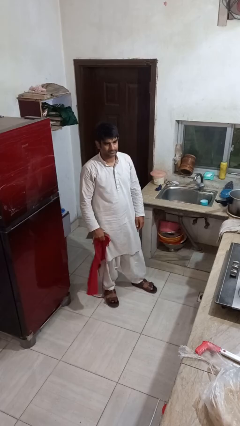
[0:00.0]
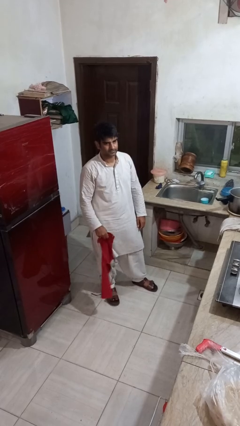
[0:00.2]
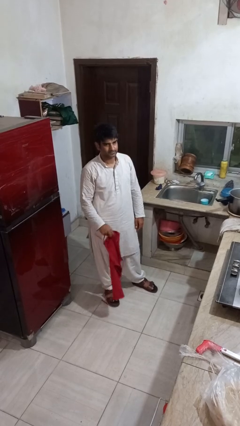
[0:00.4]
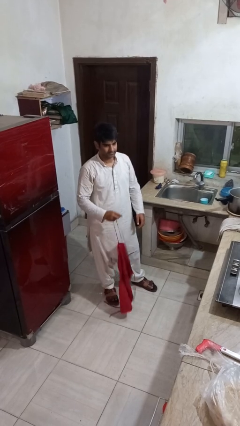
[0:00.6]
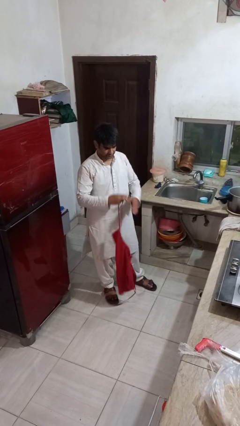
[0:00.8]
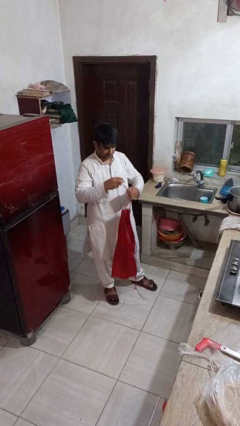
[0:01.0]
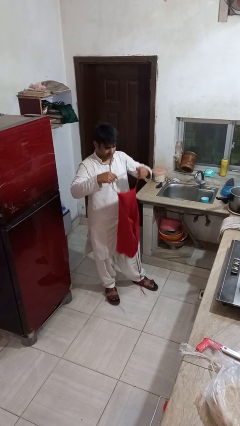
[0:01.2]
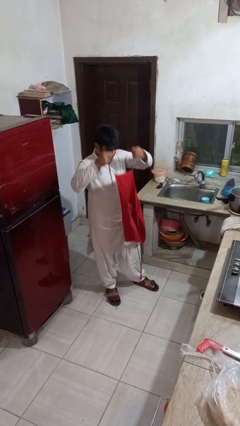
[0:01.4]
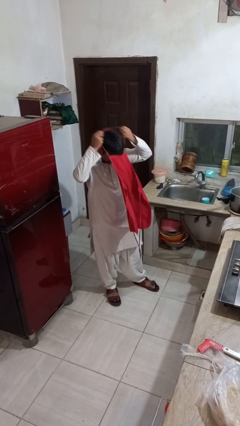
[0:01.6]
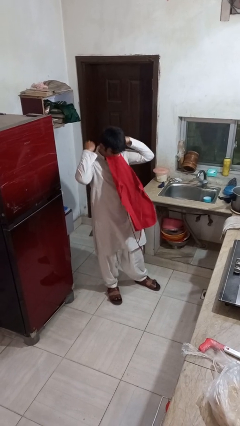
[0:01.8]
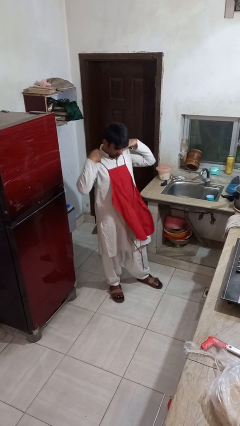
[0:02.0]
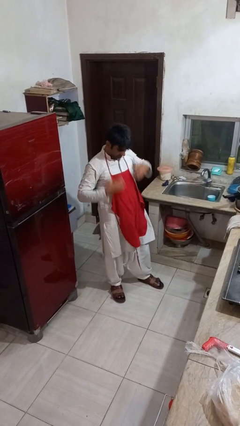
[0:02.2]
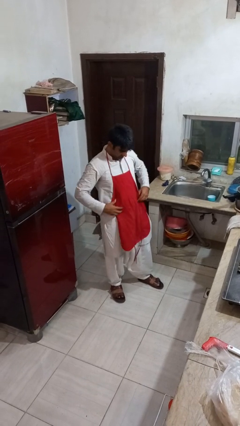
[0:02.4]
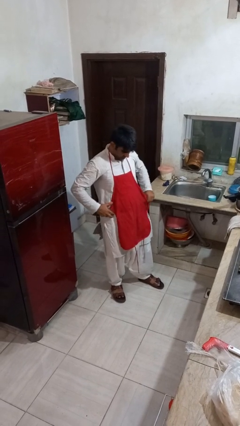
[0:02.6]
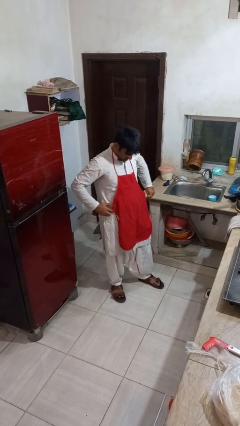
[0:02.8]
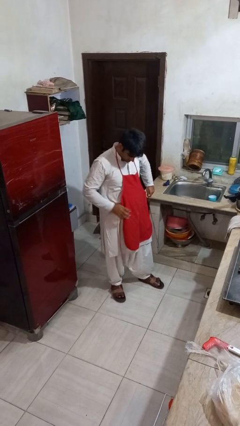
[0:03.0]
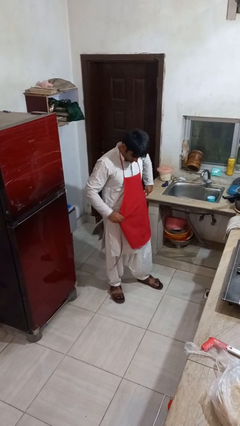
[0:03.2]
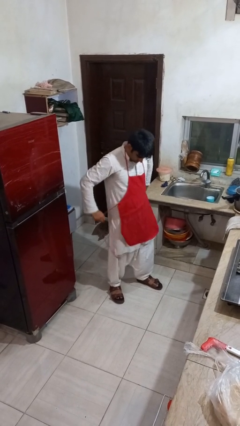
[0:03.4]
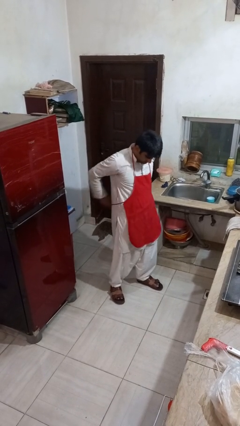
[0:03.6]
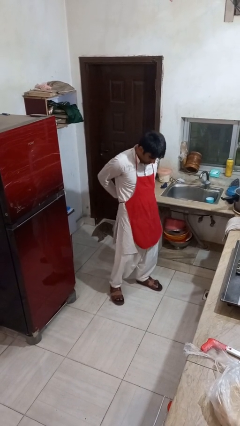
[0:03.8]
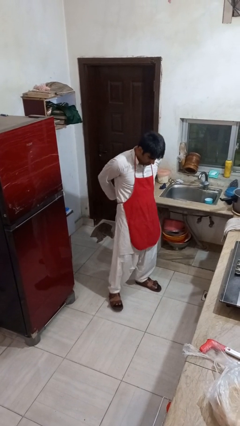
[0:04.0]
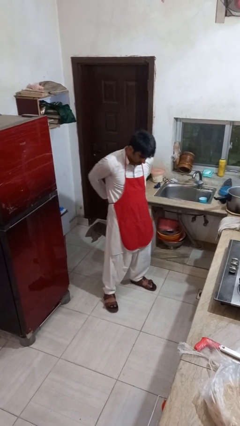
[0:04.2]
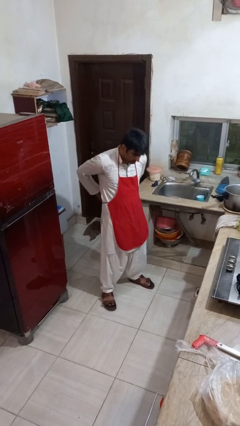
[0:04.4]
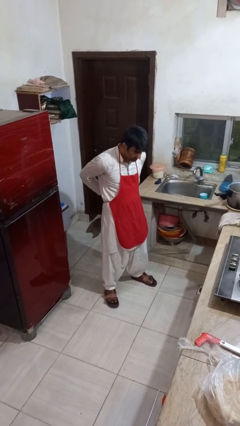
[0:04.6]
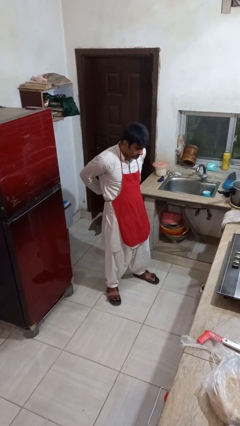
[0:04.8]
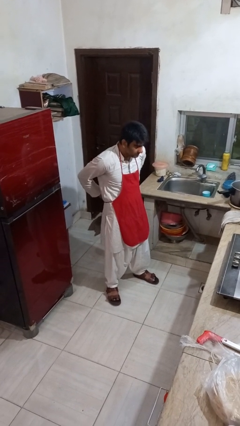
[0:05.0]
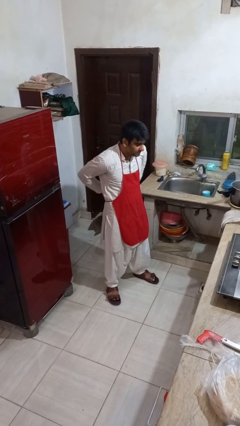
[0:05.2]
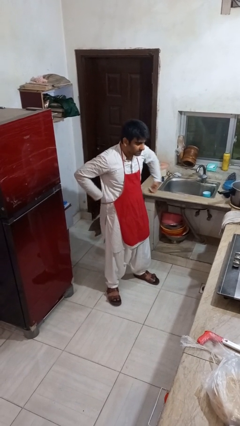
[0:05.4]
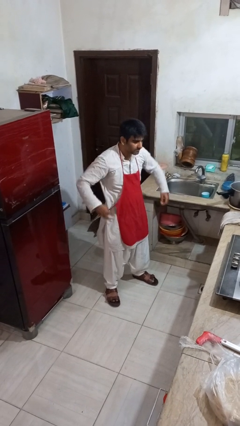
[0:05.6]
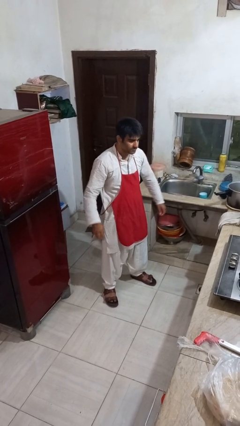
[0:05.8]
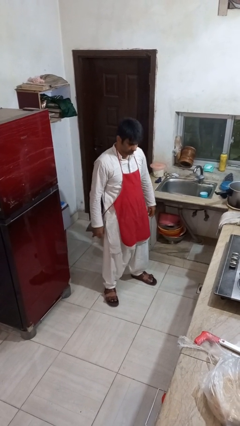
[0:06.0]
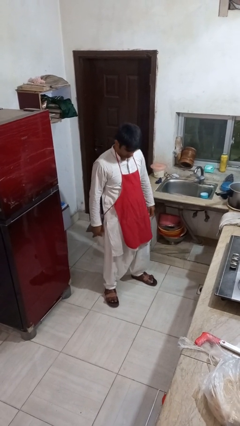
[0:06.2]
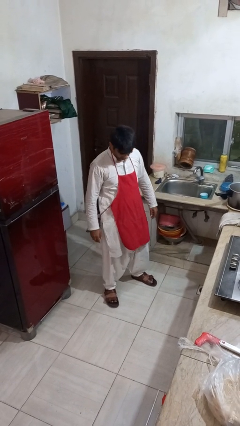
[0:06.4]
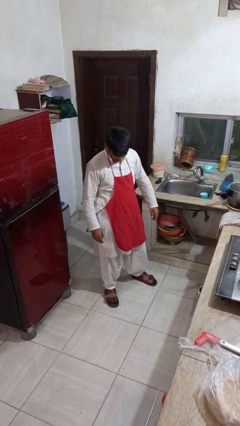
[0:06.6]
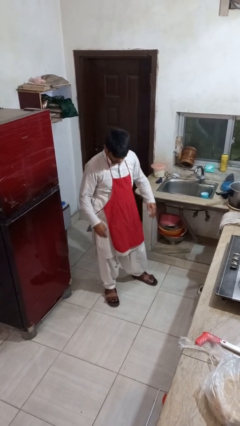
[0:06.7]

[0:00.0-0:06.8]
person puts on apron

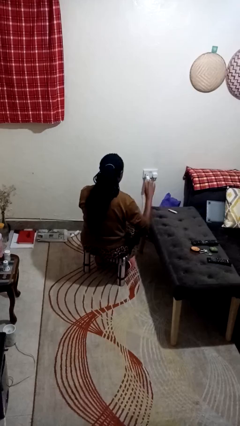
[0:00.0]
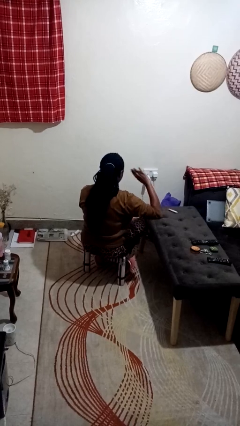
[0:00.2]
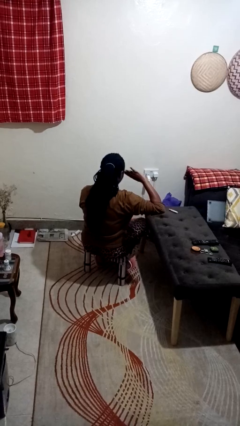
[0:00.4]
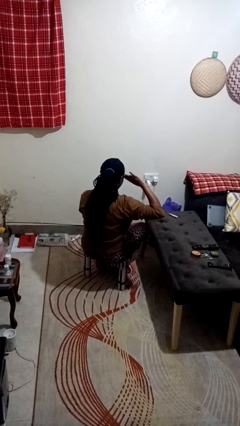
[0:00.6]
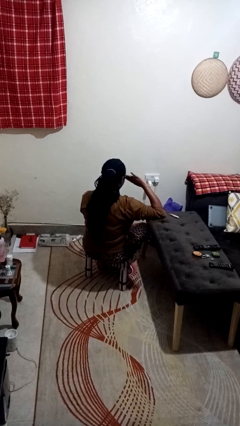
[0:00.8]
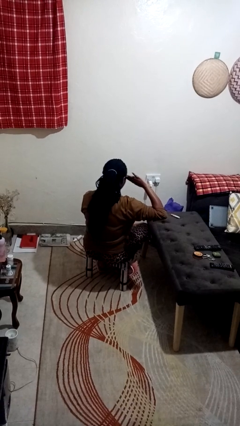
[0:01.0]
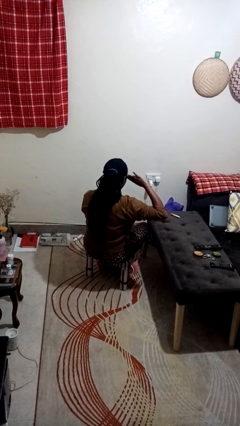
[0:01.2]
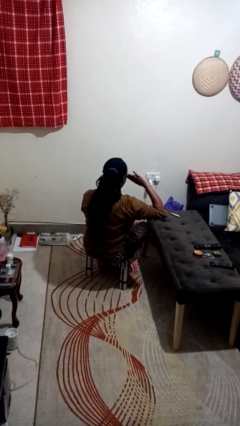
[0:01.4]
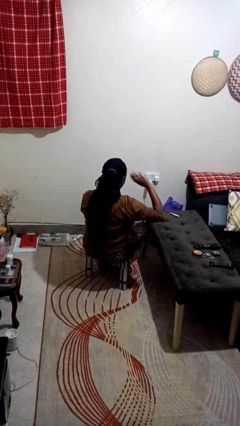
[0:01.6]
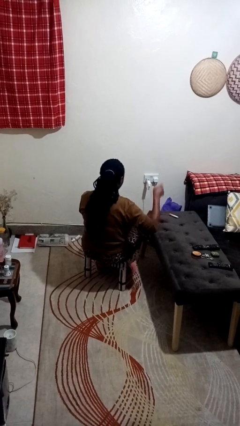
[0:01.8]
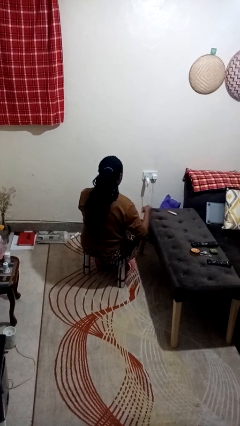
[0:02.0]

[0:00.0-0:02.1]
person salutes

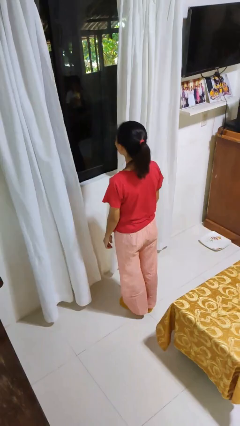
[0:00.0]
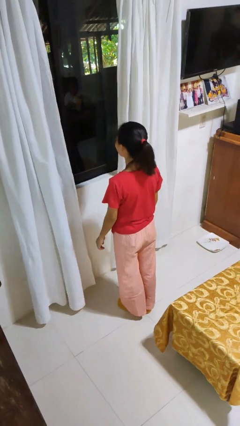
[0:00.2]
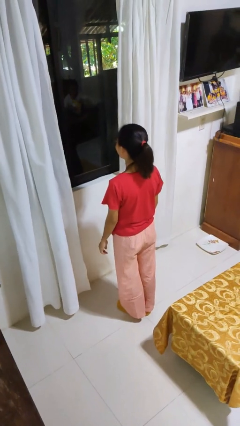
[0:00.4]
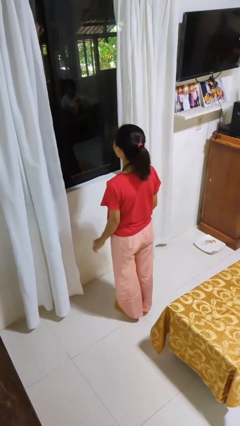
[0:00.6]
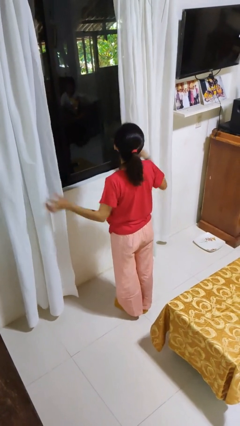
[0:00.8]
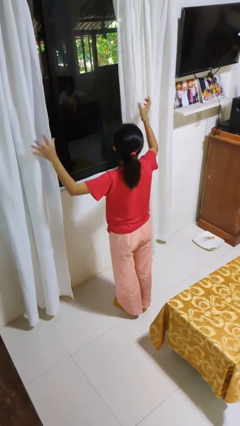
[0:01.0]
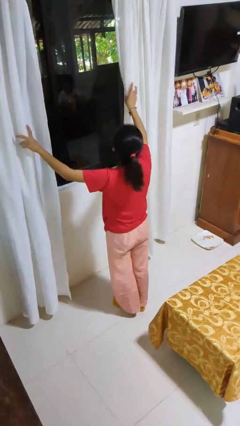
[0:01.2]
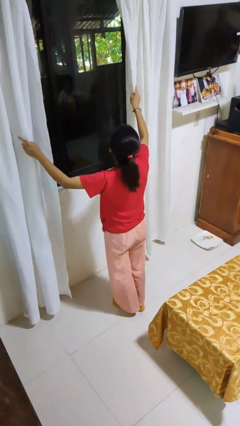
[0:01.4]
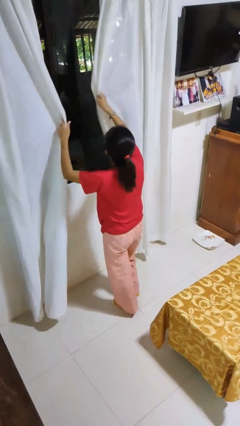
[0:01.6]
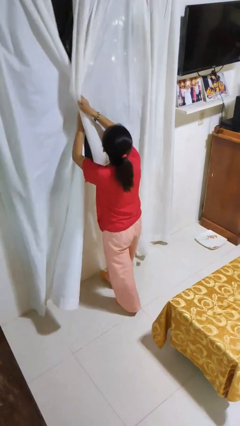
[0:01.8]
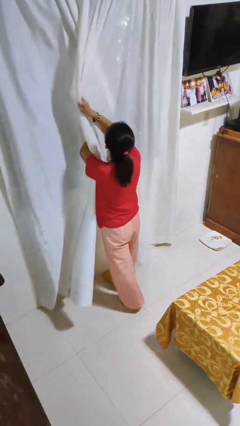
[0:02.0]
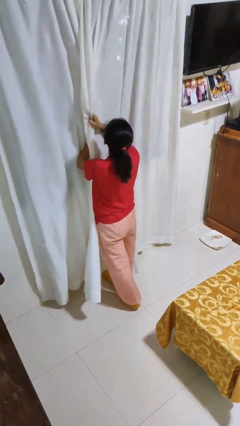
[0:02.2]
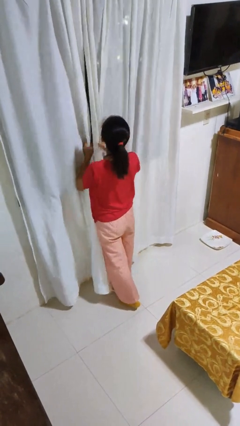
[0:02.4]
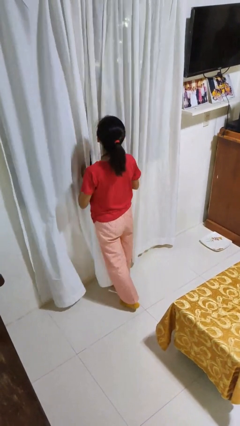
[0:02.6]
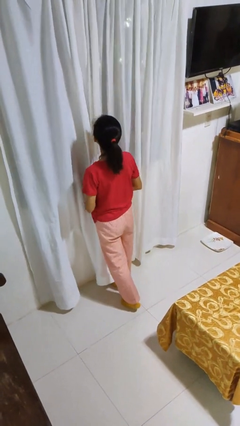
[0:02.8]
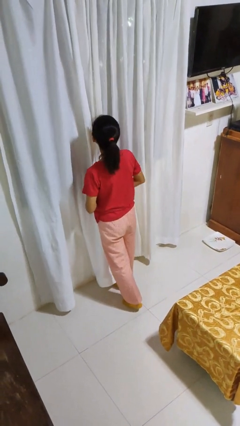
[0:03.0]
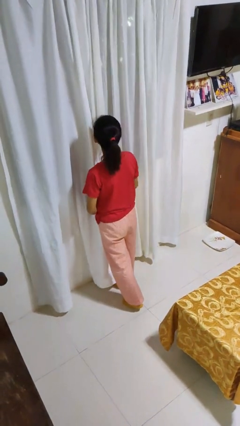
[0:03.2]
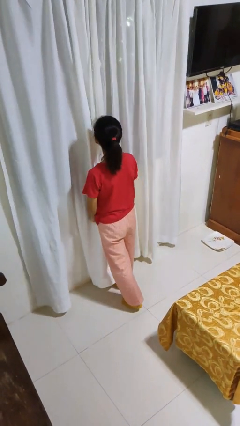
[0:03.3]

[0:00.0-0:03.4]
person closes curtains

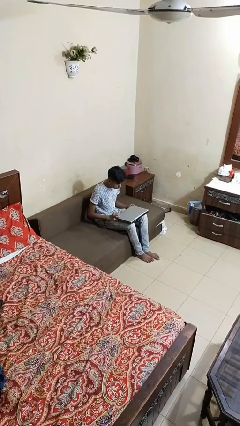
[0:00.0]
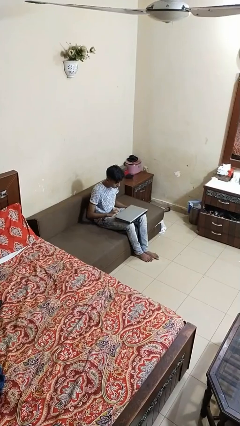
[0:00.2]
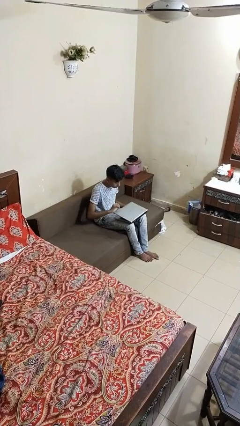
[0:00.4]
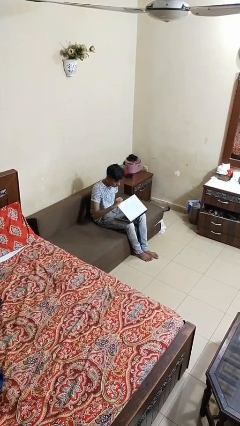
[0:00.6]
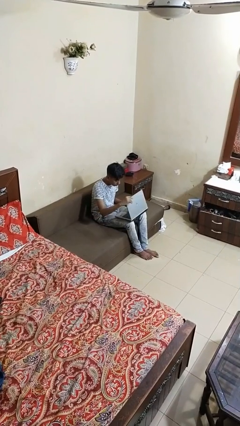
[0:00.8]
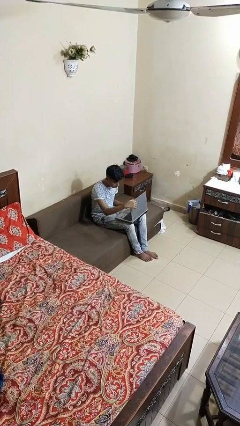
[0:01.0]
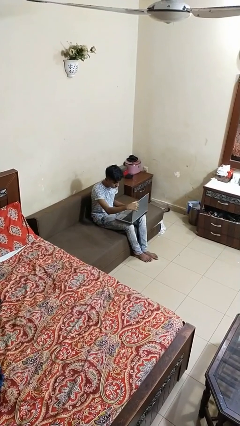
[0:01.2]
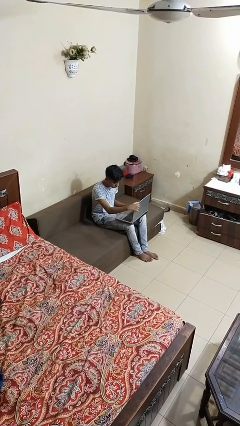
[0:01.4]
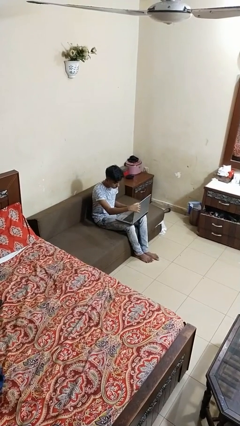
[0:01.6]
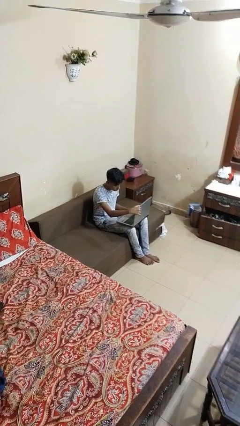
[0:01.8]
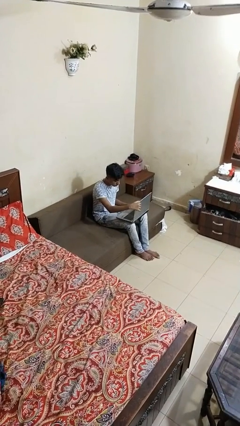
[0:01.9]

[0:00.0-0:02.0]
person opens laptop

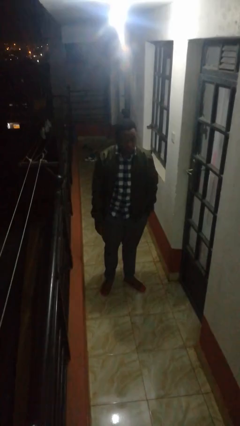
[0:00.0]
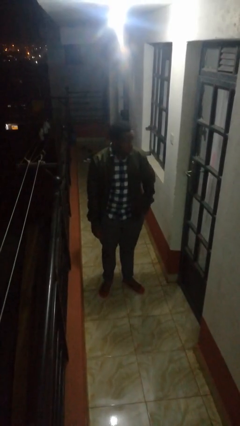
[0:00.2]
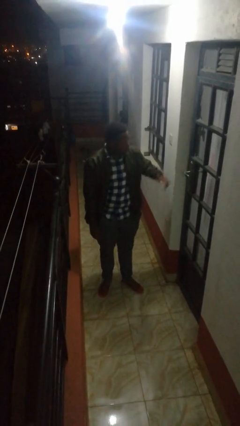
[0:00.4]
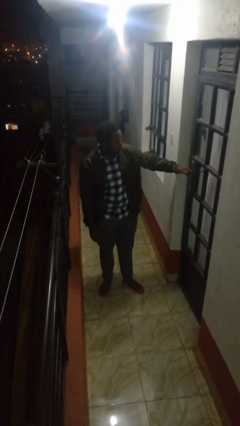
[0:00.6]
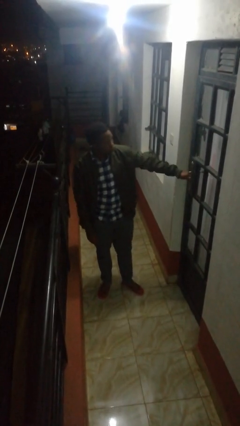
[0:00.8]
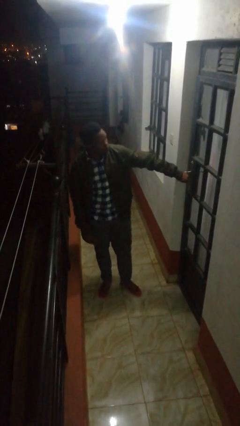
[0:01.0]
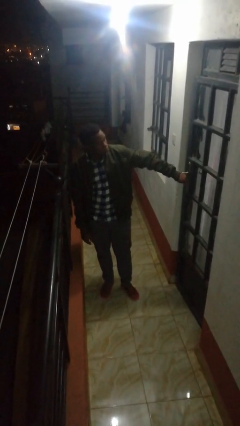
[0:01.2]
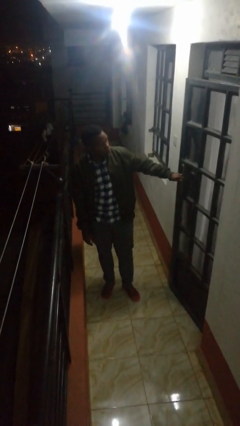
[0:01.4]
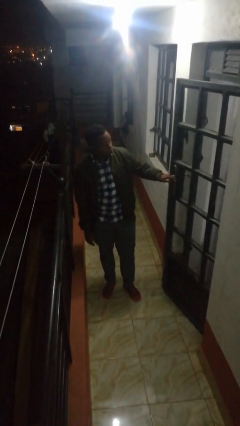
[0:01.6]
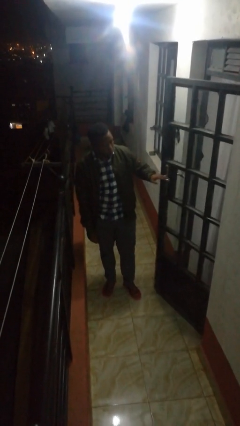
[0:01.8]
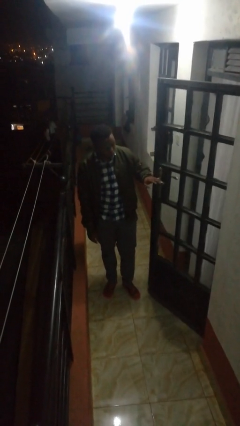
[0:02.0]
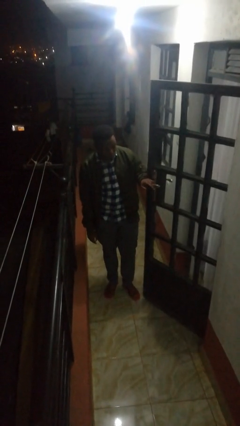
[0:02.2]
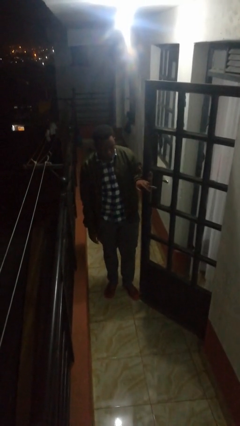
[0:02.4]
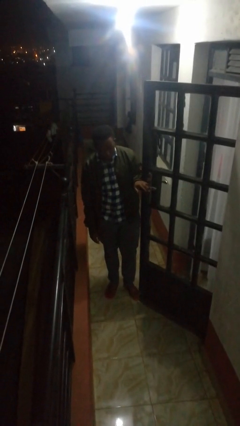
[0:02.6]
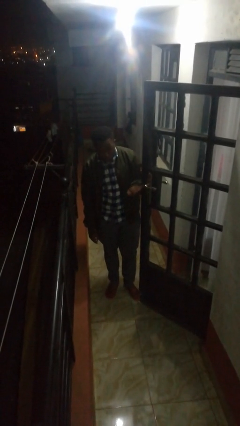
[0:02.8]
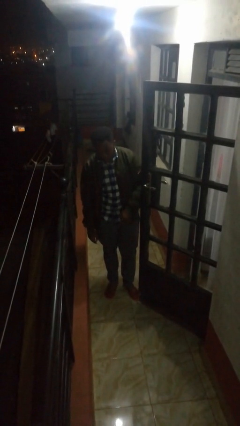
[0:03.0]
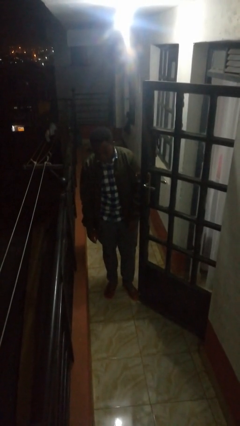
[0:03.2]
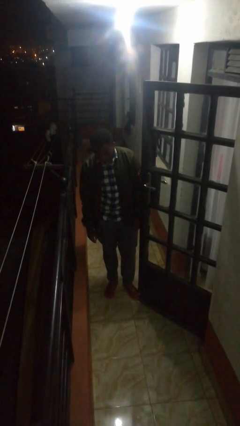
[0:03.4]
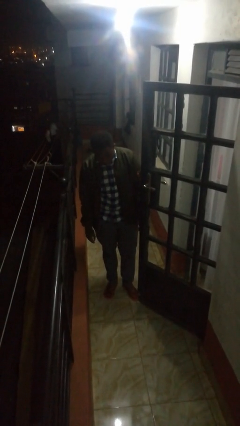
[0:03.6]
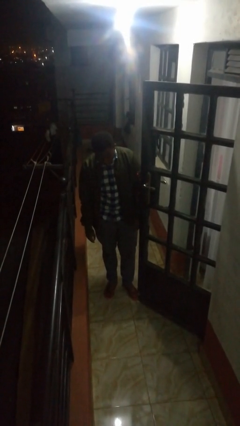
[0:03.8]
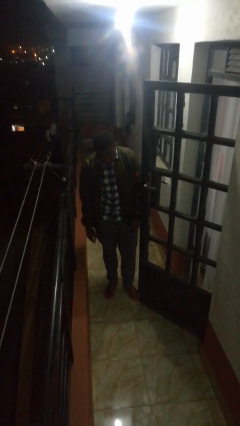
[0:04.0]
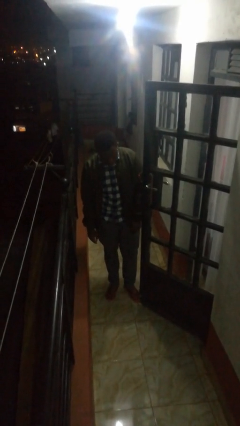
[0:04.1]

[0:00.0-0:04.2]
person opens facility door
